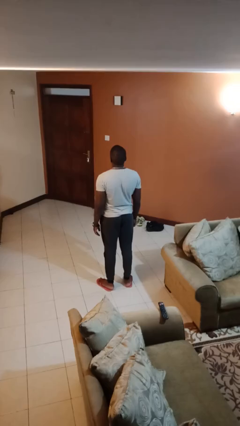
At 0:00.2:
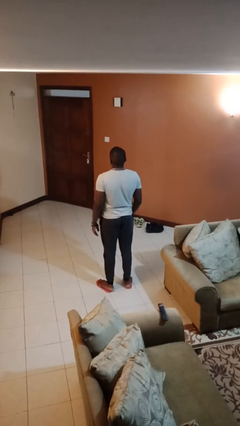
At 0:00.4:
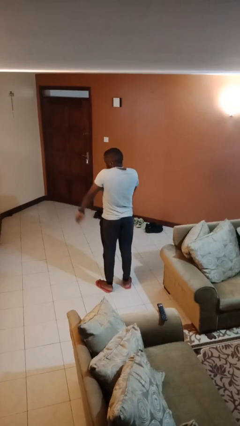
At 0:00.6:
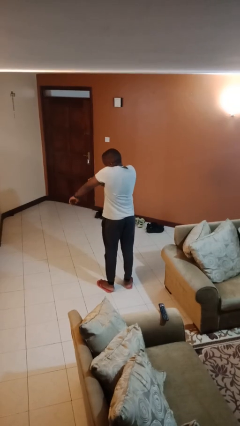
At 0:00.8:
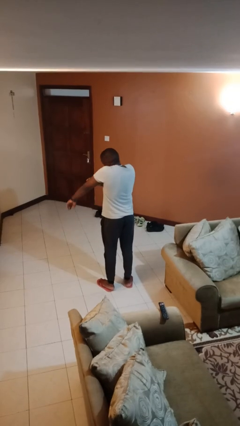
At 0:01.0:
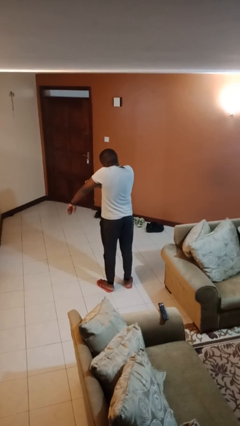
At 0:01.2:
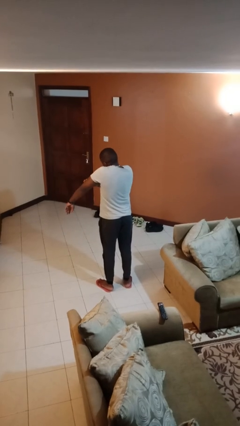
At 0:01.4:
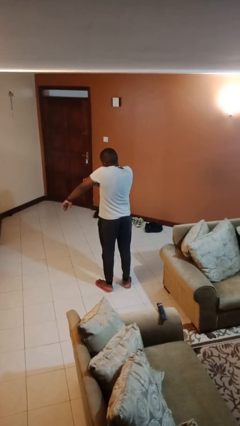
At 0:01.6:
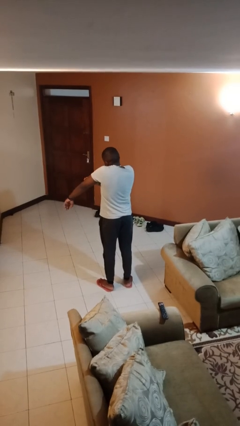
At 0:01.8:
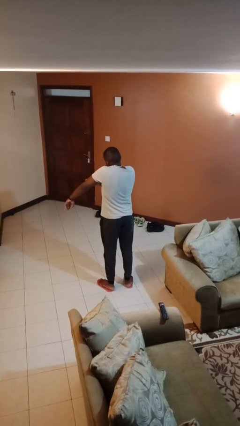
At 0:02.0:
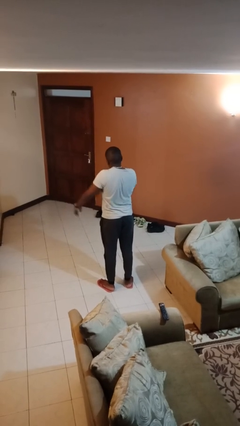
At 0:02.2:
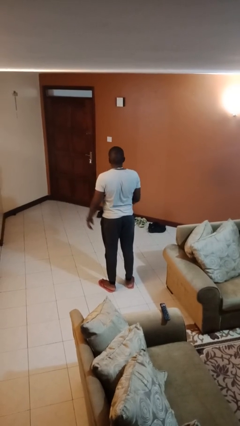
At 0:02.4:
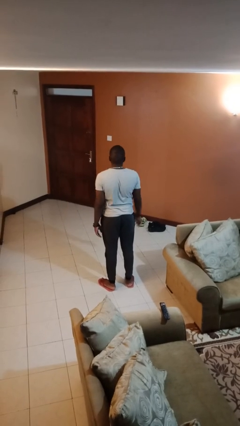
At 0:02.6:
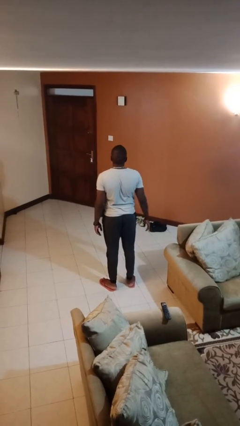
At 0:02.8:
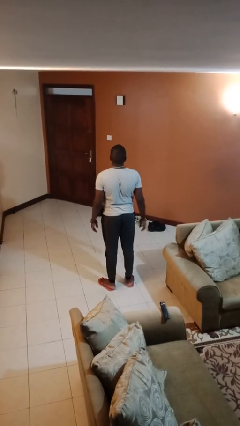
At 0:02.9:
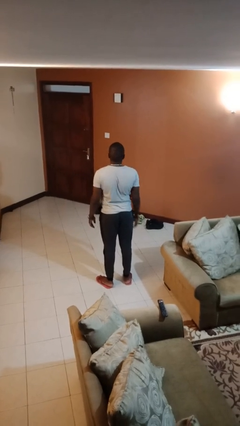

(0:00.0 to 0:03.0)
person swats bug

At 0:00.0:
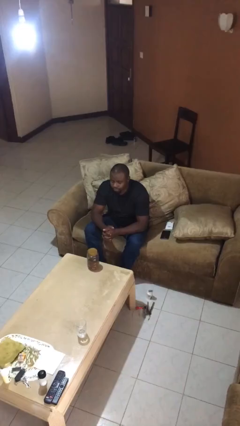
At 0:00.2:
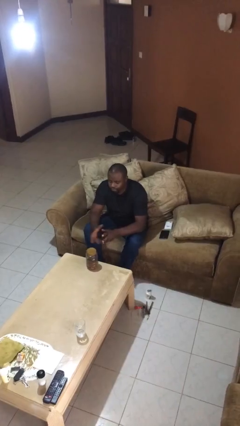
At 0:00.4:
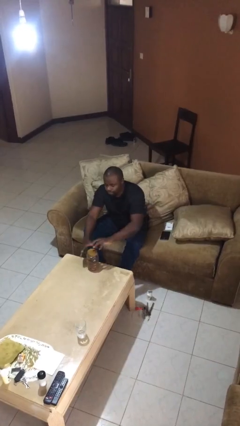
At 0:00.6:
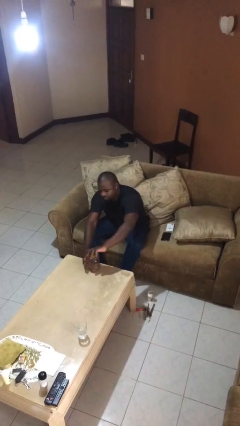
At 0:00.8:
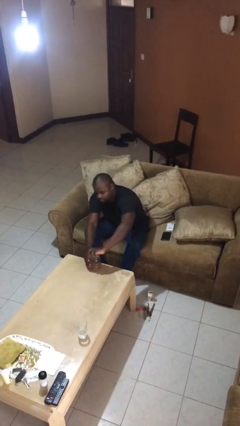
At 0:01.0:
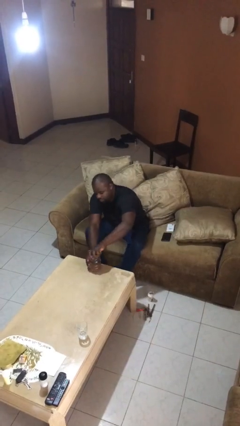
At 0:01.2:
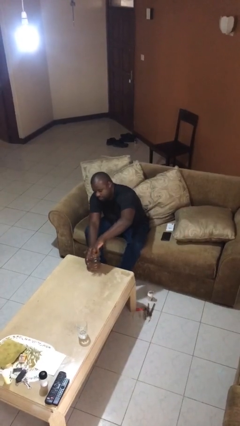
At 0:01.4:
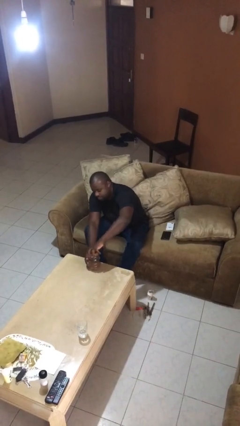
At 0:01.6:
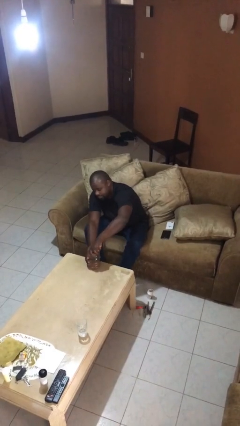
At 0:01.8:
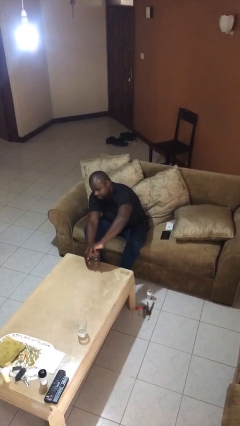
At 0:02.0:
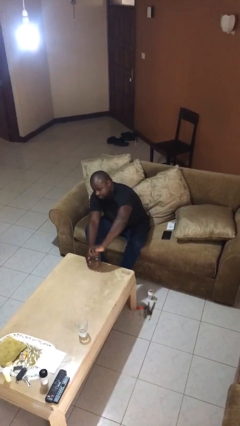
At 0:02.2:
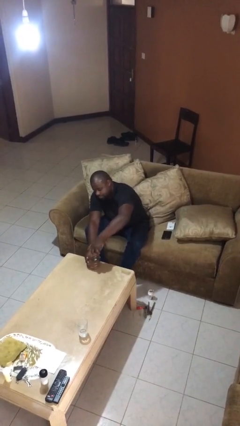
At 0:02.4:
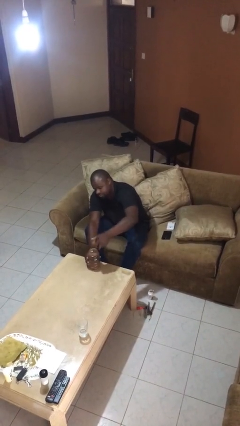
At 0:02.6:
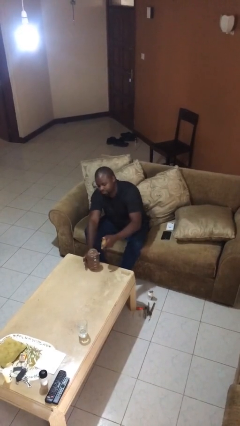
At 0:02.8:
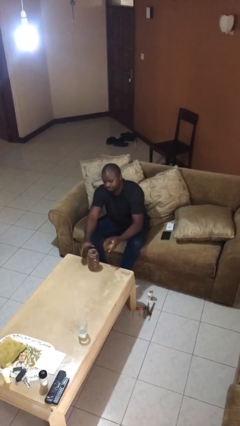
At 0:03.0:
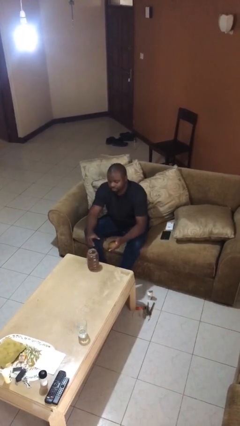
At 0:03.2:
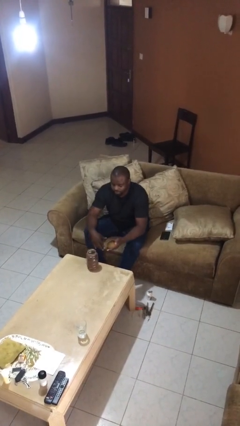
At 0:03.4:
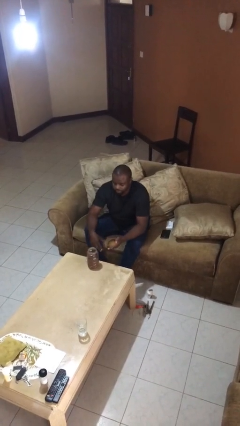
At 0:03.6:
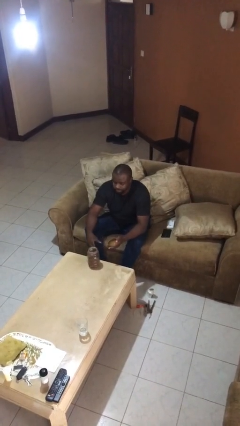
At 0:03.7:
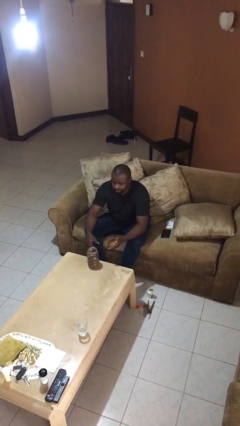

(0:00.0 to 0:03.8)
person opens jar

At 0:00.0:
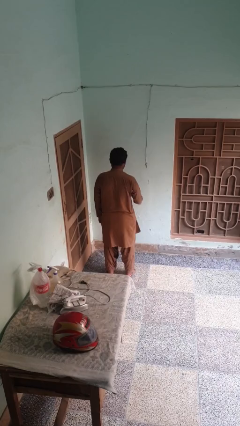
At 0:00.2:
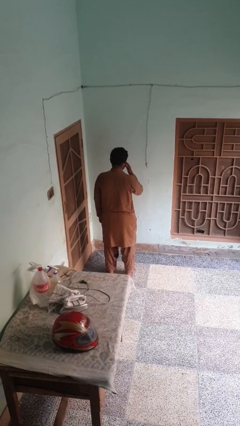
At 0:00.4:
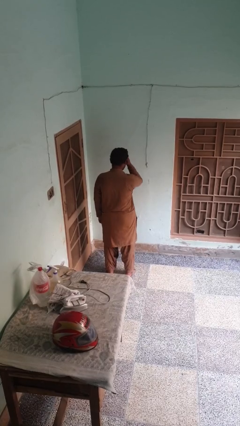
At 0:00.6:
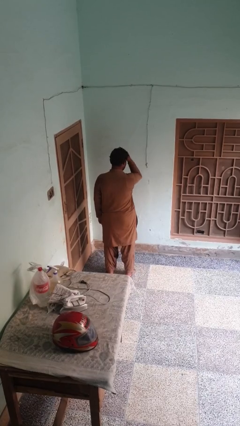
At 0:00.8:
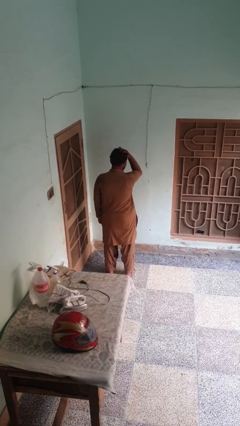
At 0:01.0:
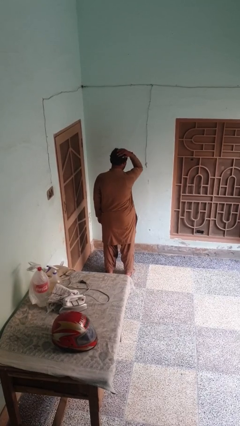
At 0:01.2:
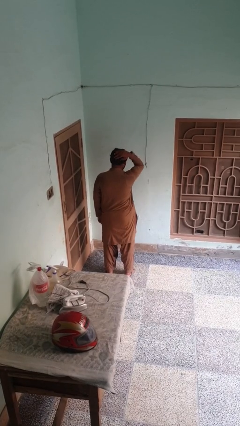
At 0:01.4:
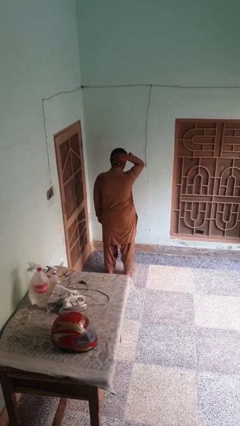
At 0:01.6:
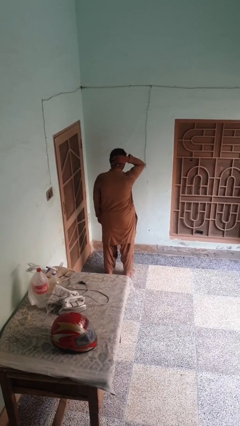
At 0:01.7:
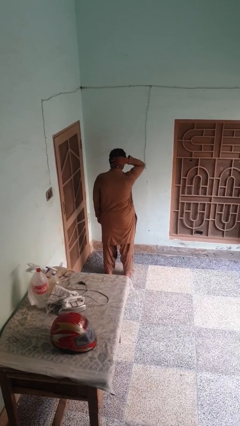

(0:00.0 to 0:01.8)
person strokes hair

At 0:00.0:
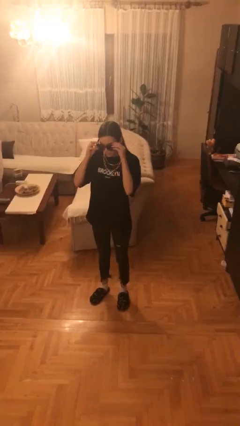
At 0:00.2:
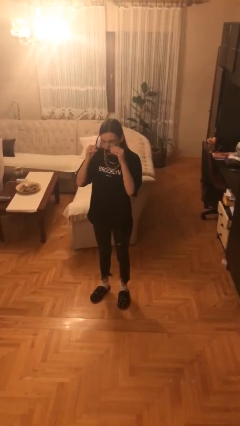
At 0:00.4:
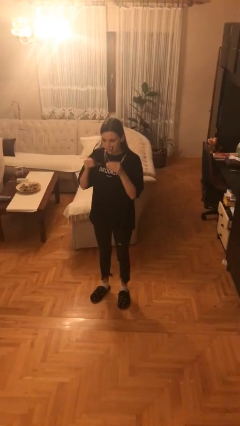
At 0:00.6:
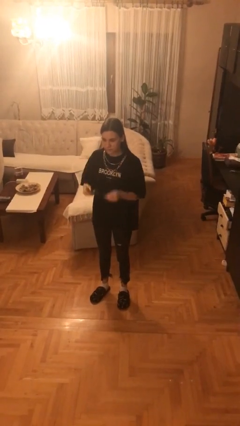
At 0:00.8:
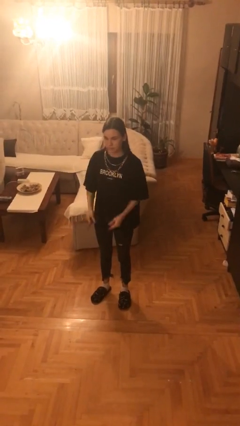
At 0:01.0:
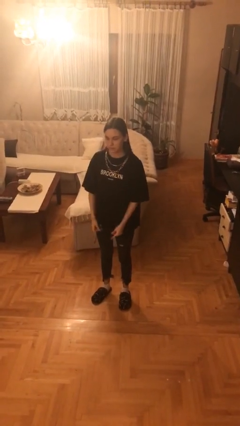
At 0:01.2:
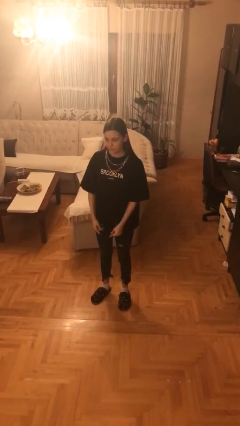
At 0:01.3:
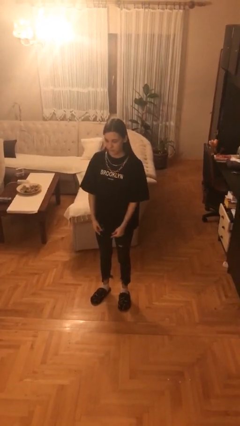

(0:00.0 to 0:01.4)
person takes off sunglasses

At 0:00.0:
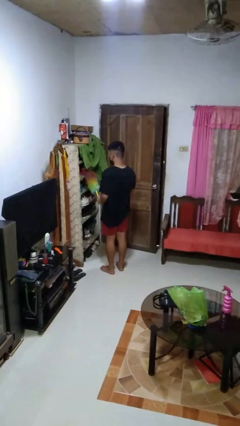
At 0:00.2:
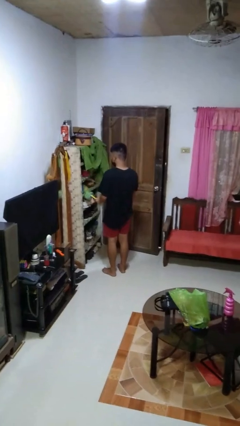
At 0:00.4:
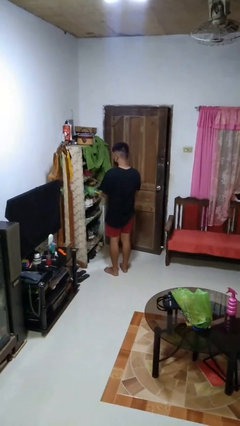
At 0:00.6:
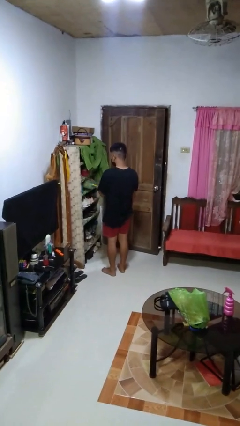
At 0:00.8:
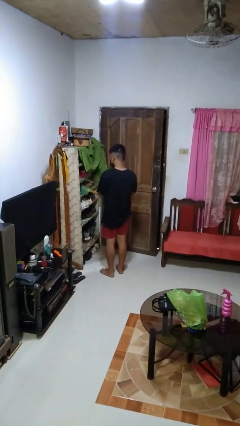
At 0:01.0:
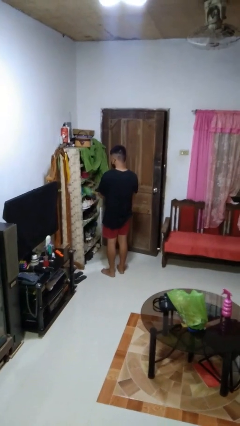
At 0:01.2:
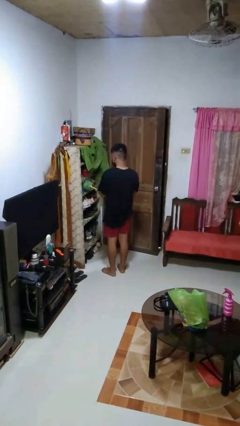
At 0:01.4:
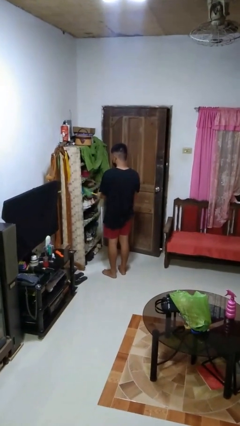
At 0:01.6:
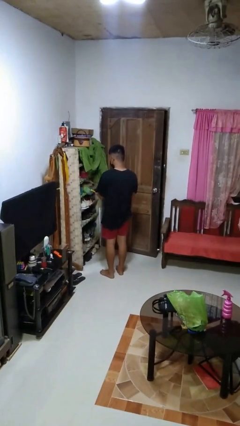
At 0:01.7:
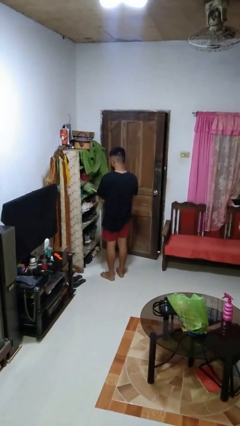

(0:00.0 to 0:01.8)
person dusts furniture

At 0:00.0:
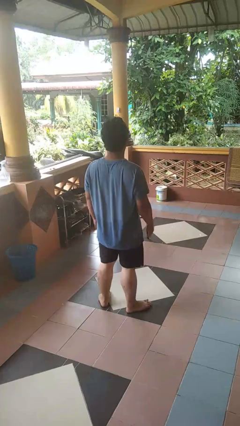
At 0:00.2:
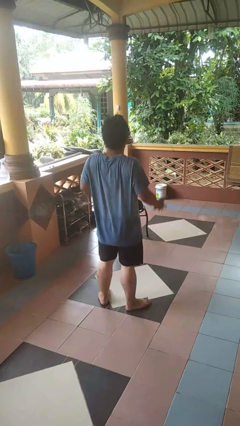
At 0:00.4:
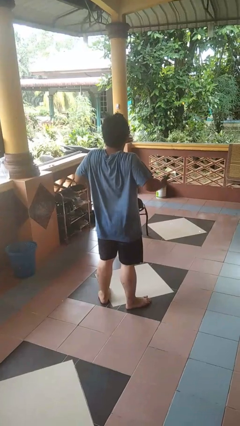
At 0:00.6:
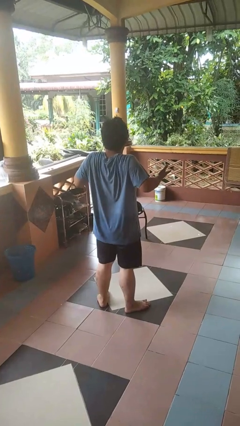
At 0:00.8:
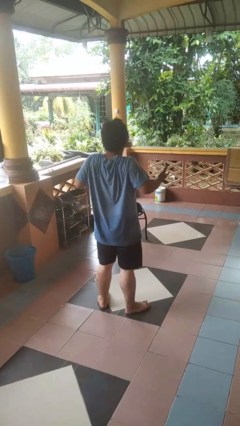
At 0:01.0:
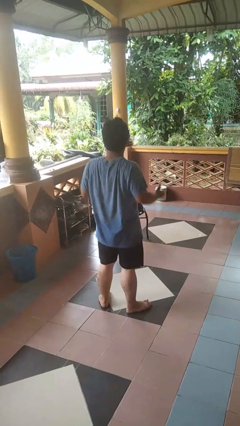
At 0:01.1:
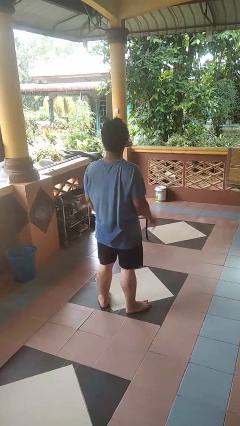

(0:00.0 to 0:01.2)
person shrugs

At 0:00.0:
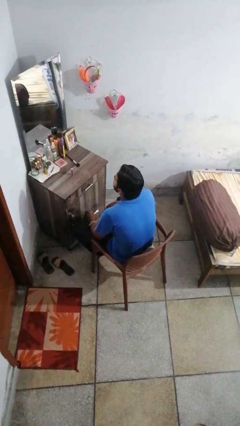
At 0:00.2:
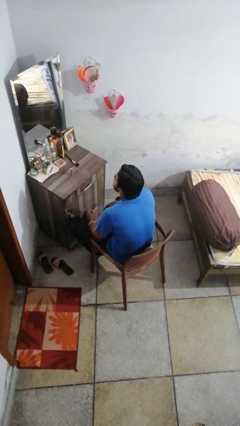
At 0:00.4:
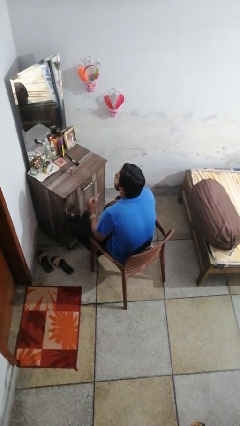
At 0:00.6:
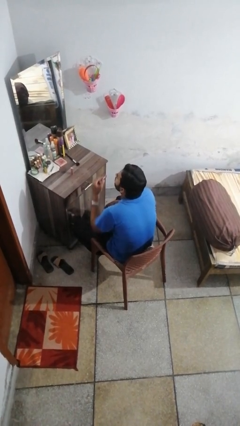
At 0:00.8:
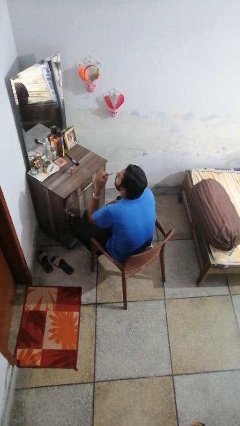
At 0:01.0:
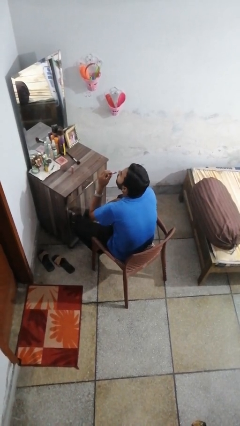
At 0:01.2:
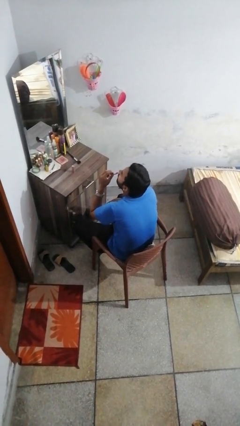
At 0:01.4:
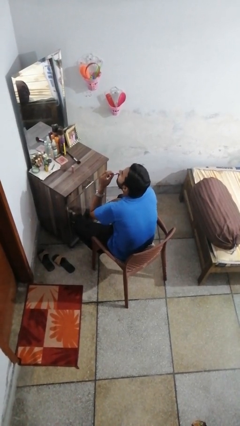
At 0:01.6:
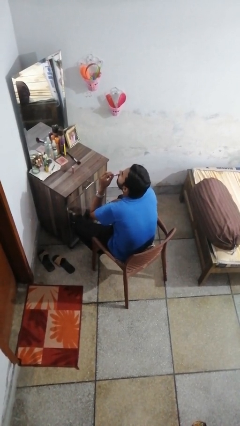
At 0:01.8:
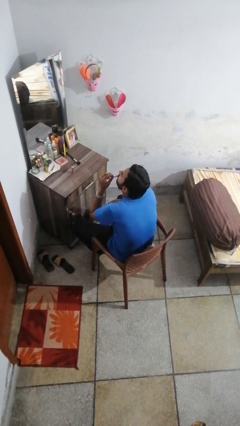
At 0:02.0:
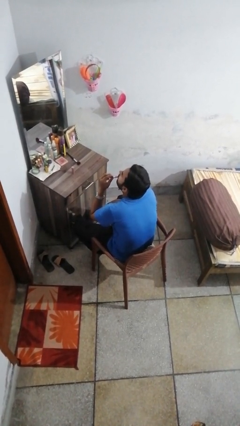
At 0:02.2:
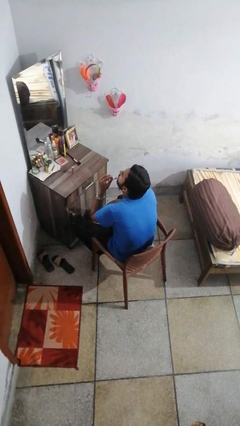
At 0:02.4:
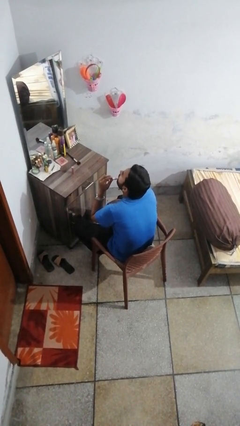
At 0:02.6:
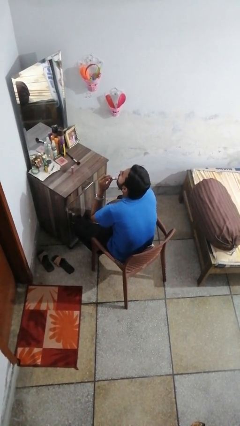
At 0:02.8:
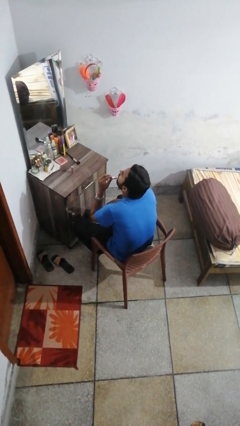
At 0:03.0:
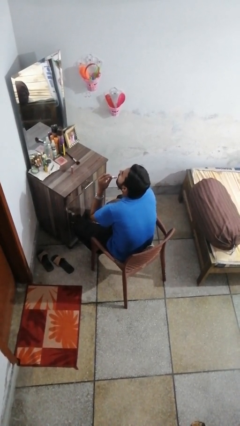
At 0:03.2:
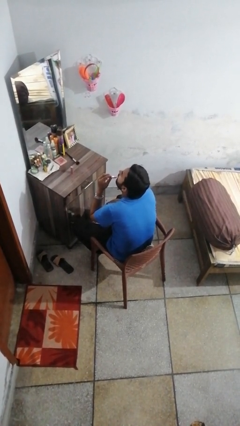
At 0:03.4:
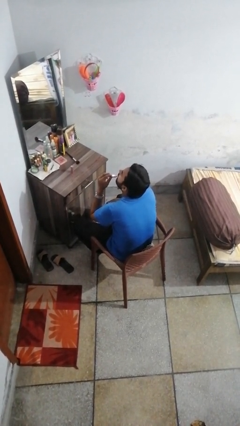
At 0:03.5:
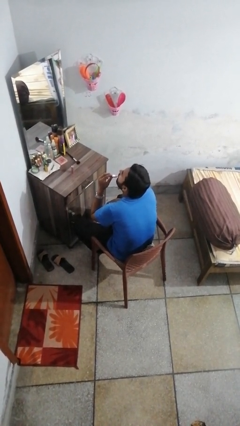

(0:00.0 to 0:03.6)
person applies lip makeup
